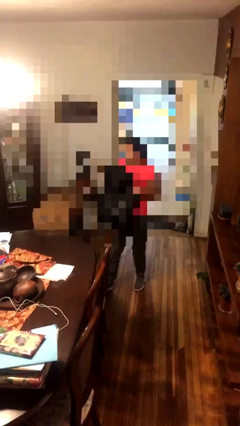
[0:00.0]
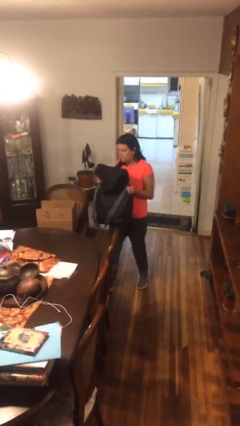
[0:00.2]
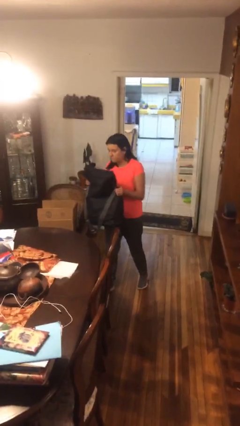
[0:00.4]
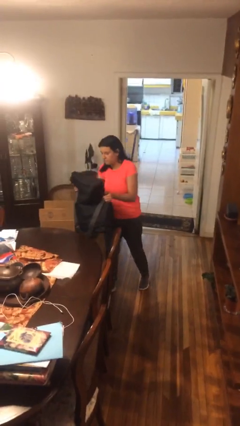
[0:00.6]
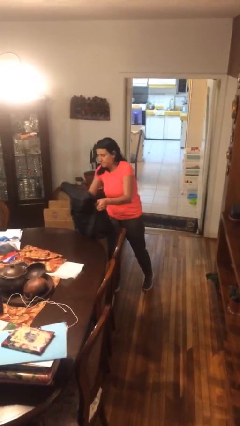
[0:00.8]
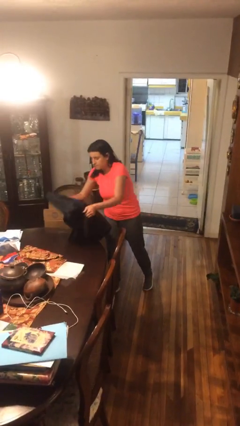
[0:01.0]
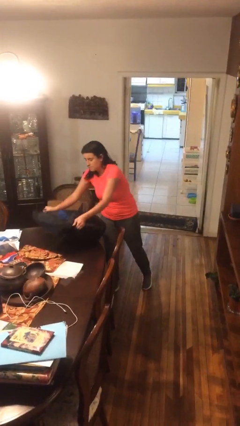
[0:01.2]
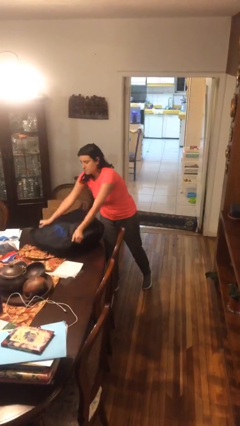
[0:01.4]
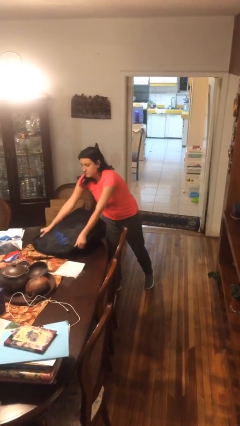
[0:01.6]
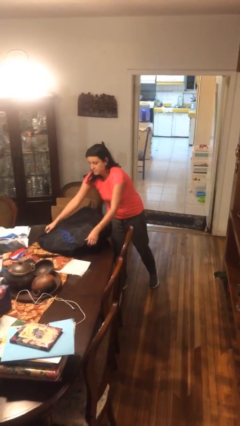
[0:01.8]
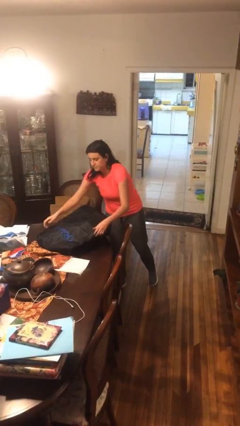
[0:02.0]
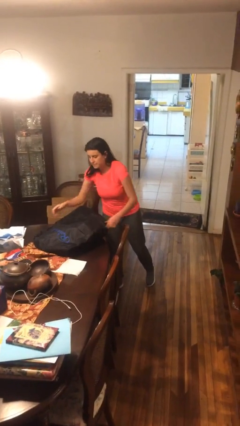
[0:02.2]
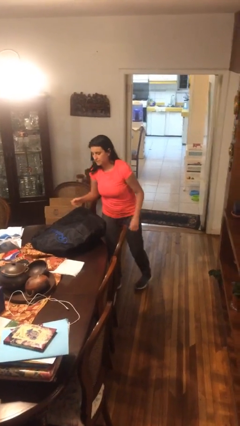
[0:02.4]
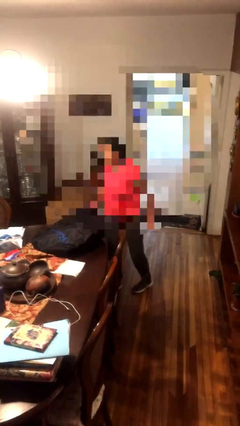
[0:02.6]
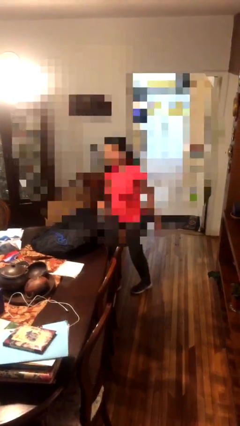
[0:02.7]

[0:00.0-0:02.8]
person puts down object on table

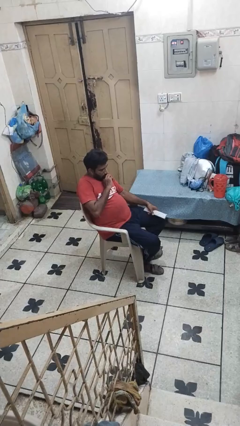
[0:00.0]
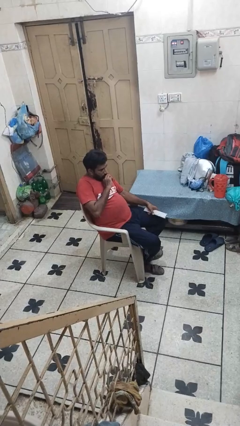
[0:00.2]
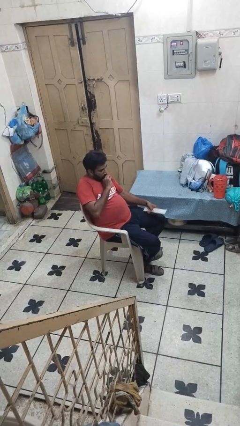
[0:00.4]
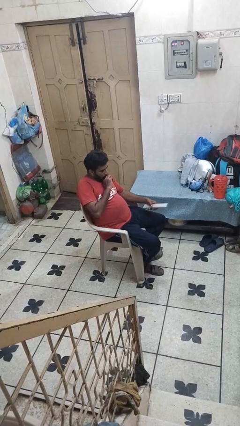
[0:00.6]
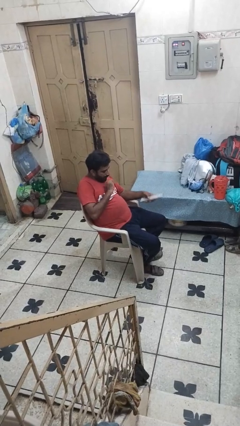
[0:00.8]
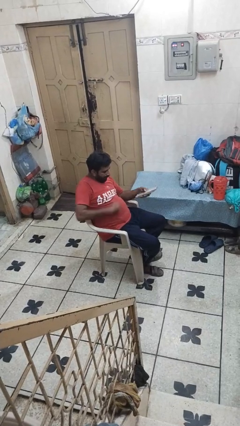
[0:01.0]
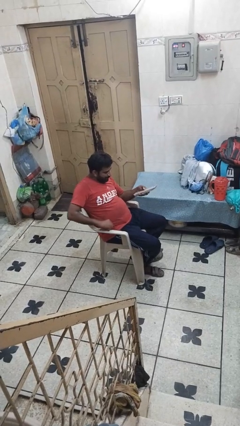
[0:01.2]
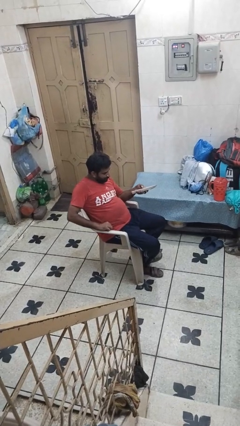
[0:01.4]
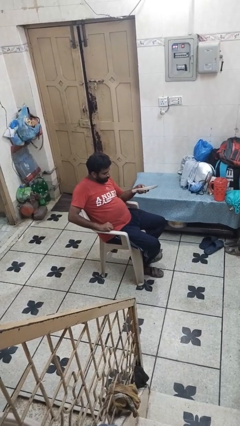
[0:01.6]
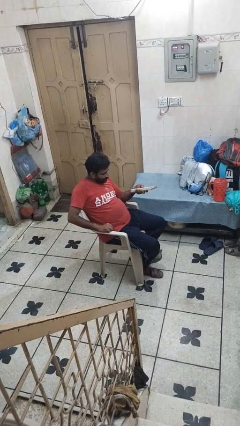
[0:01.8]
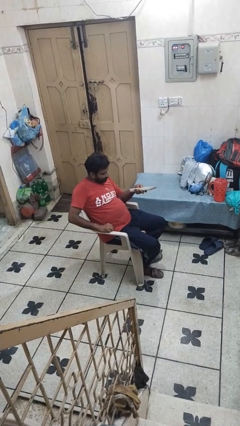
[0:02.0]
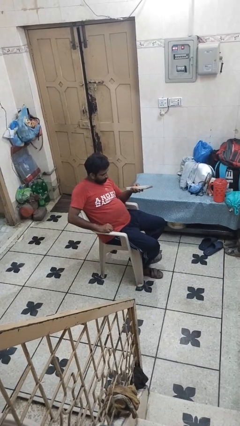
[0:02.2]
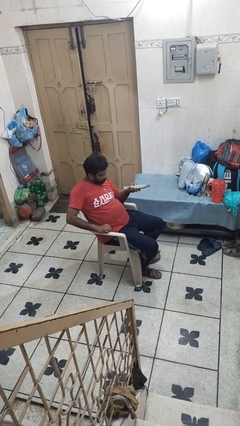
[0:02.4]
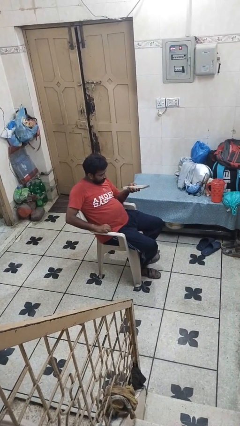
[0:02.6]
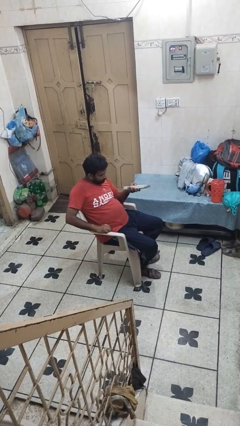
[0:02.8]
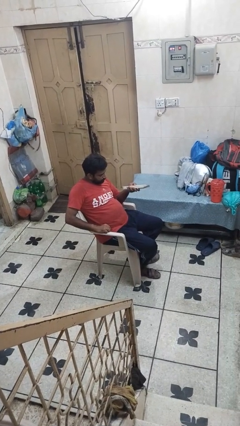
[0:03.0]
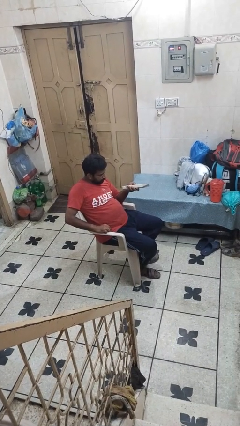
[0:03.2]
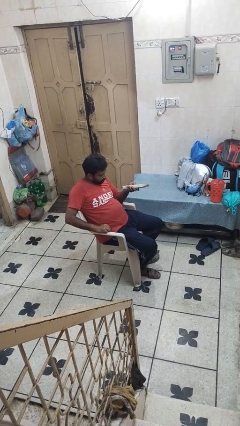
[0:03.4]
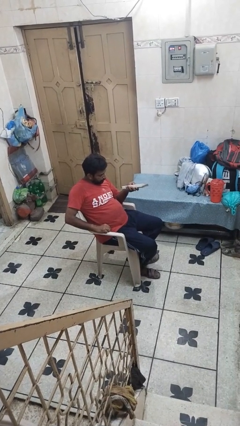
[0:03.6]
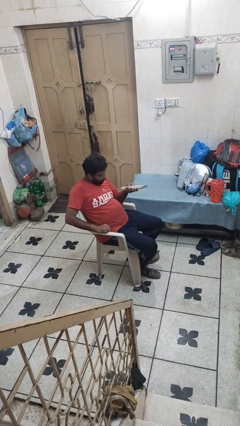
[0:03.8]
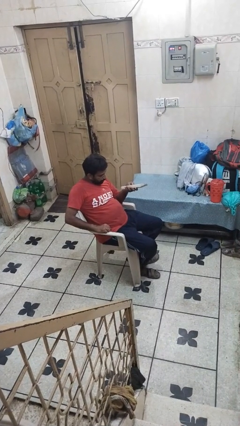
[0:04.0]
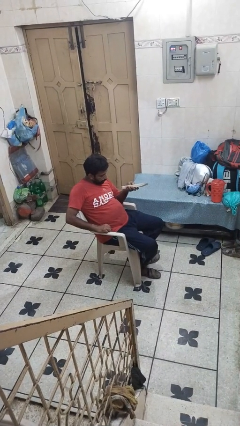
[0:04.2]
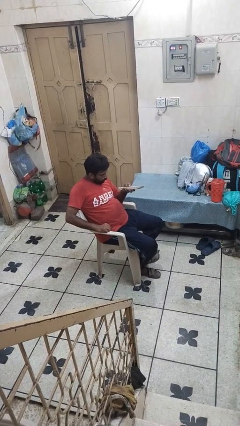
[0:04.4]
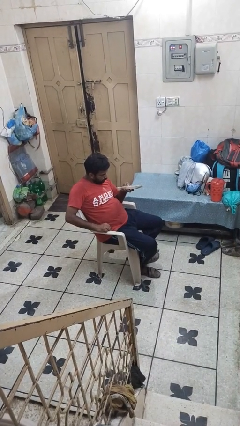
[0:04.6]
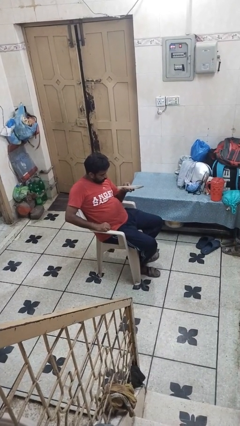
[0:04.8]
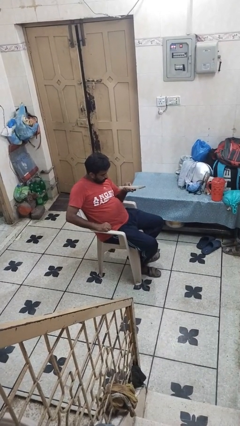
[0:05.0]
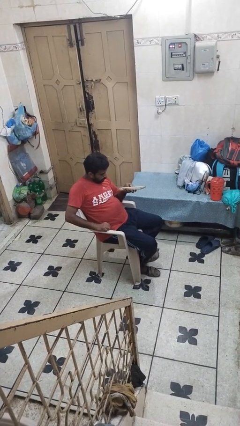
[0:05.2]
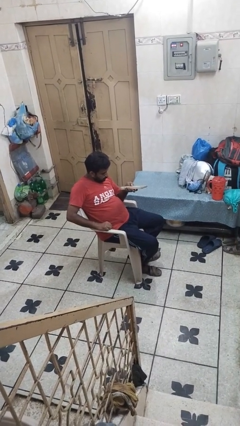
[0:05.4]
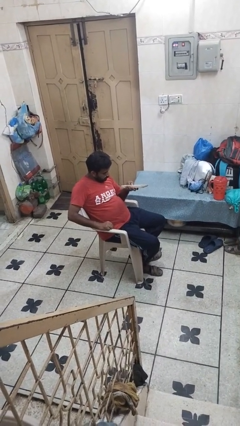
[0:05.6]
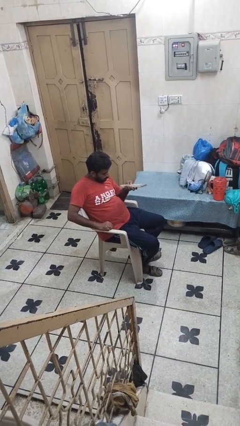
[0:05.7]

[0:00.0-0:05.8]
person uses television remote

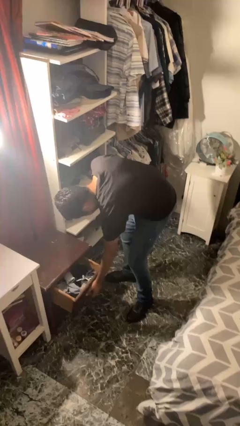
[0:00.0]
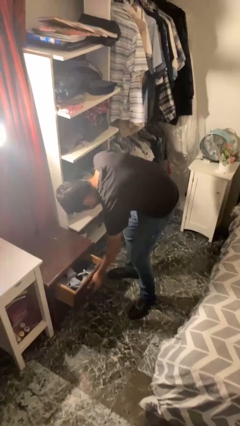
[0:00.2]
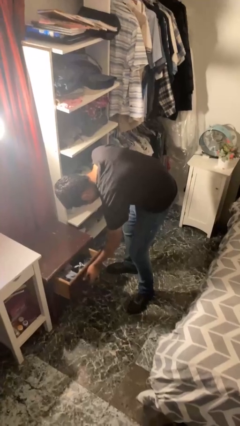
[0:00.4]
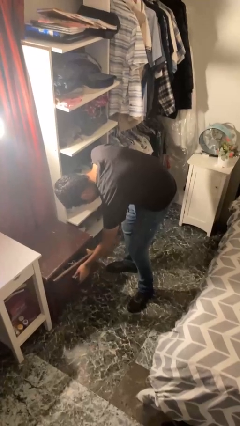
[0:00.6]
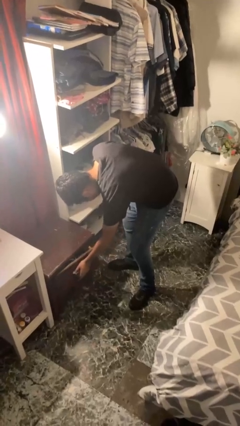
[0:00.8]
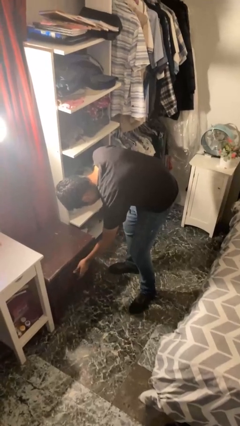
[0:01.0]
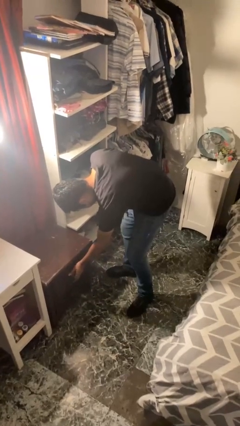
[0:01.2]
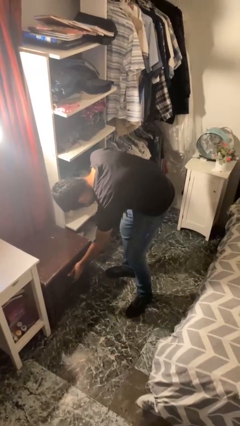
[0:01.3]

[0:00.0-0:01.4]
person closes dresser drawer

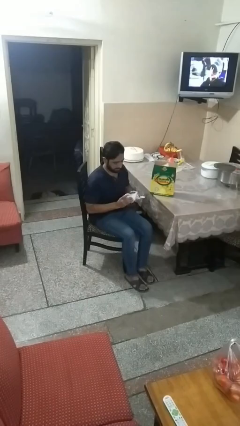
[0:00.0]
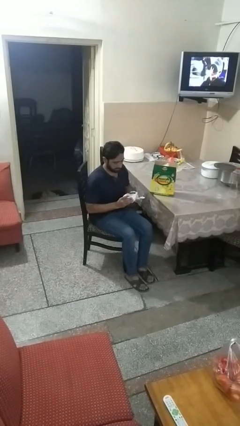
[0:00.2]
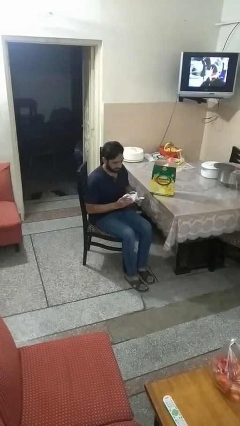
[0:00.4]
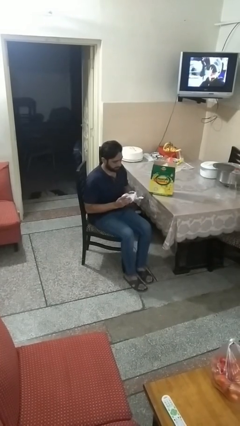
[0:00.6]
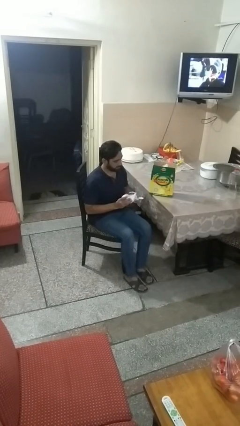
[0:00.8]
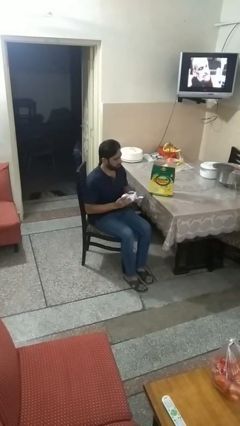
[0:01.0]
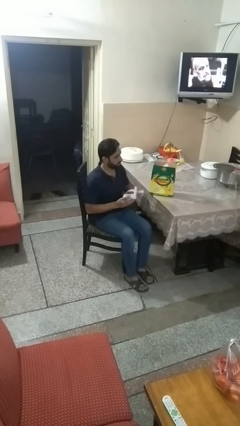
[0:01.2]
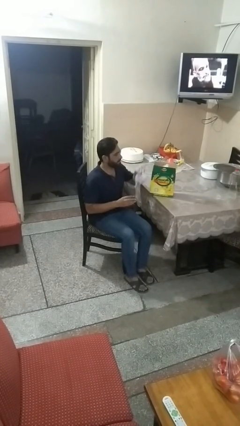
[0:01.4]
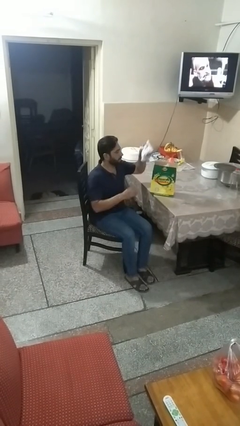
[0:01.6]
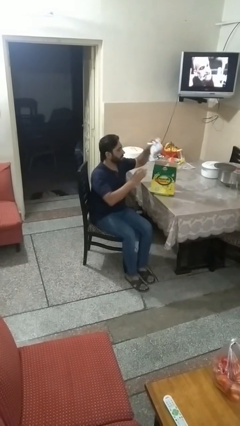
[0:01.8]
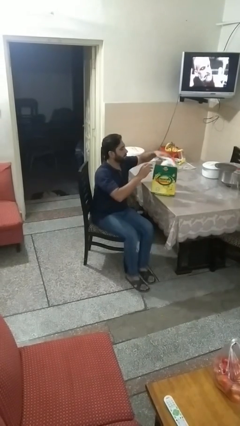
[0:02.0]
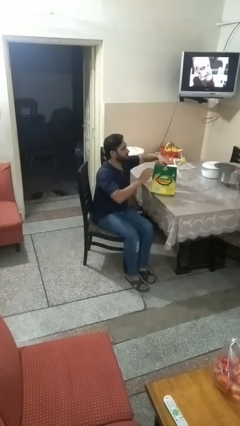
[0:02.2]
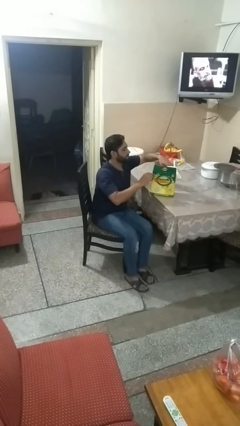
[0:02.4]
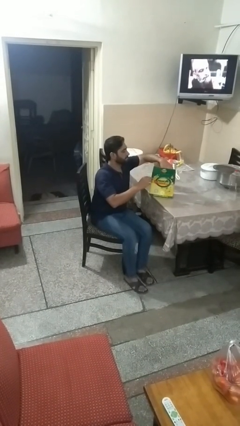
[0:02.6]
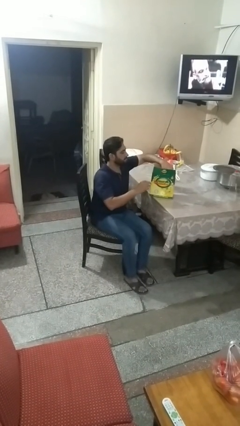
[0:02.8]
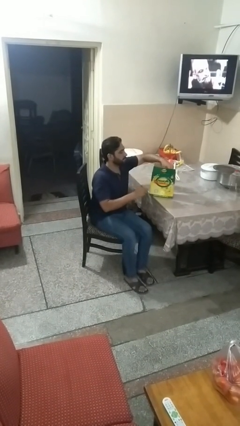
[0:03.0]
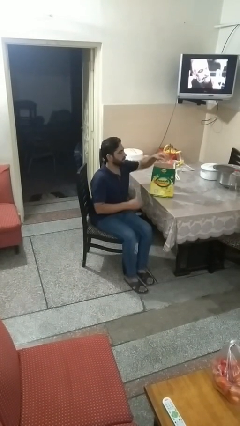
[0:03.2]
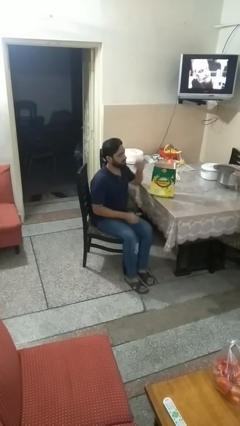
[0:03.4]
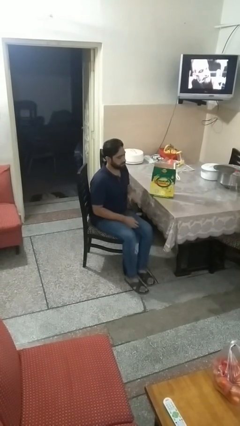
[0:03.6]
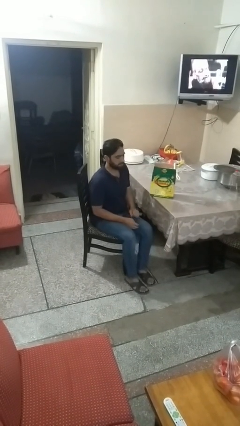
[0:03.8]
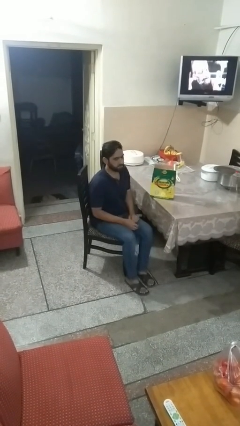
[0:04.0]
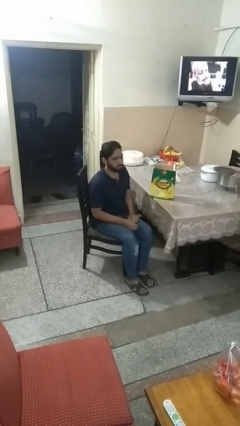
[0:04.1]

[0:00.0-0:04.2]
person puts object into box

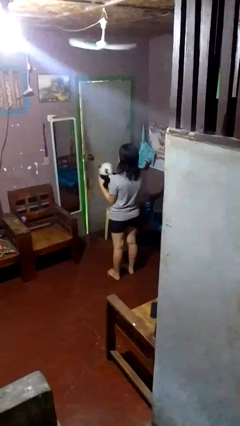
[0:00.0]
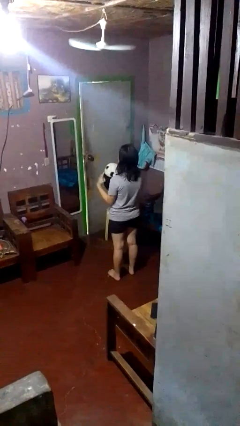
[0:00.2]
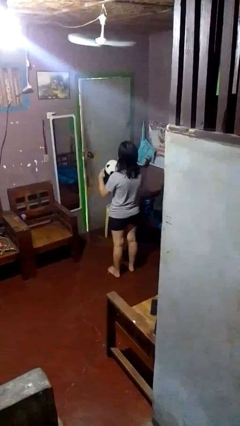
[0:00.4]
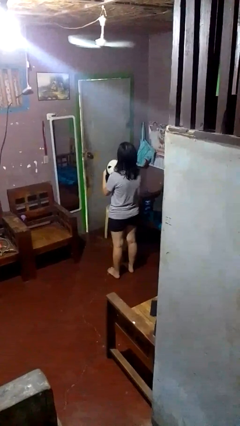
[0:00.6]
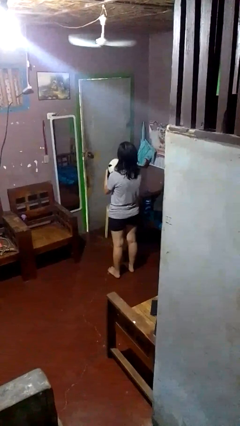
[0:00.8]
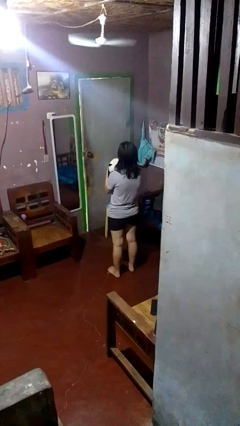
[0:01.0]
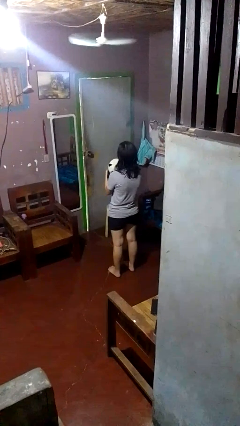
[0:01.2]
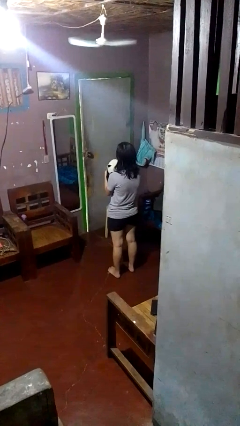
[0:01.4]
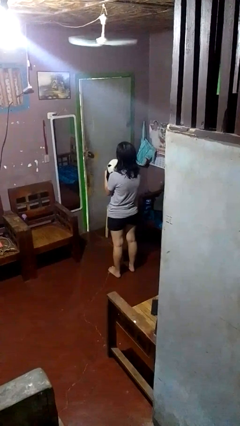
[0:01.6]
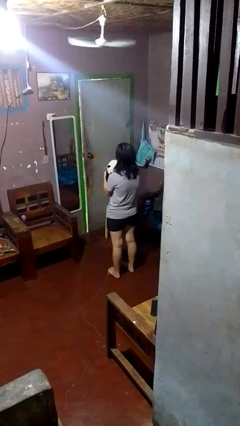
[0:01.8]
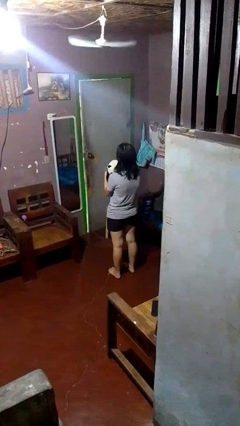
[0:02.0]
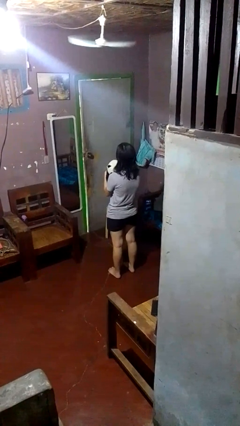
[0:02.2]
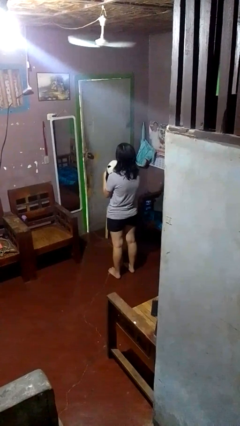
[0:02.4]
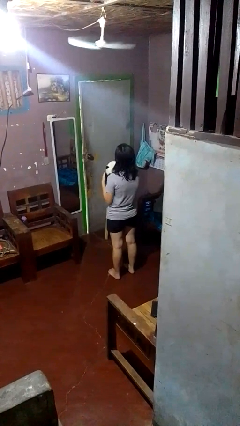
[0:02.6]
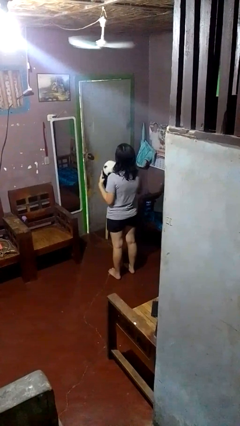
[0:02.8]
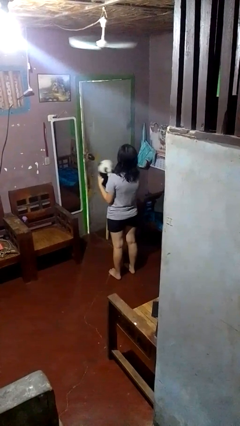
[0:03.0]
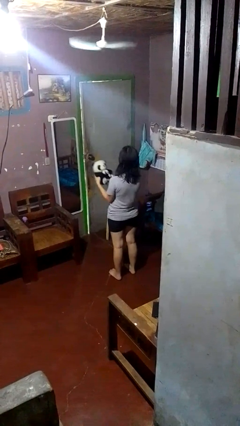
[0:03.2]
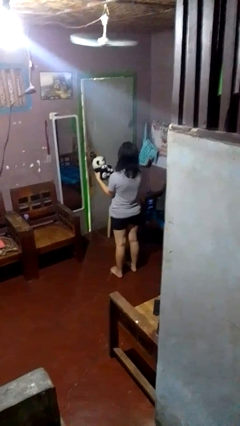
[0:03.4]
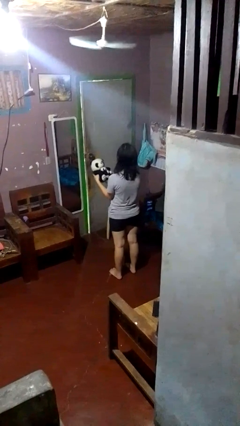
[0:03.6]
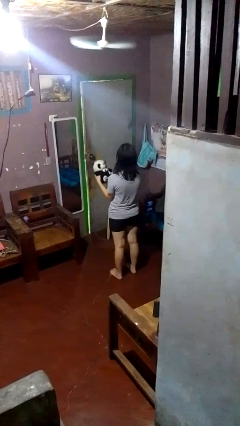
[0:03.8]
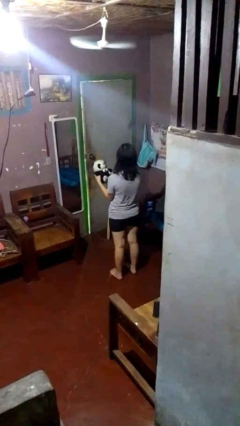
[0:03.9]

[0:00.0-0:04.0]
person hugs stuffed animal
